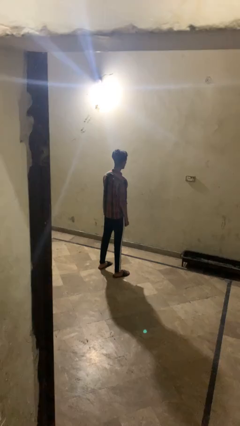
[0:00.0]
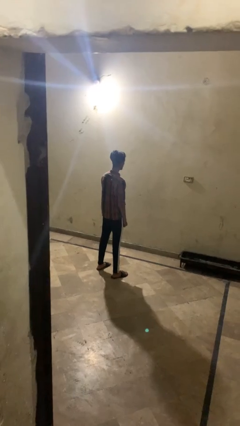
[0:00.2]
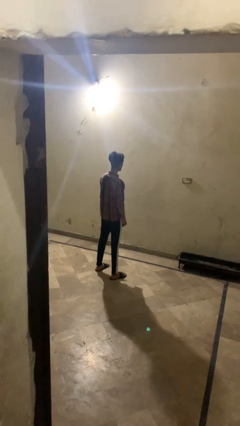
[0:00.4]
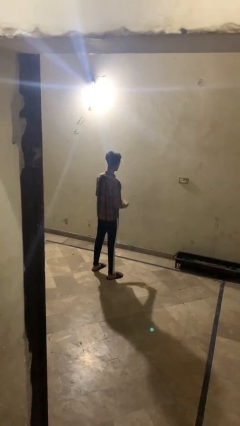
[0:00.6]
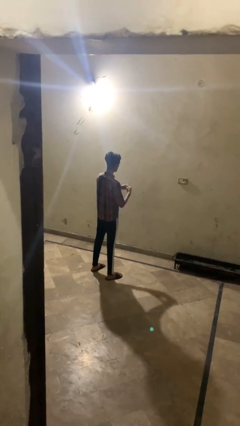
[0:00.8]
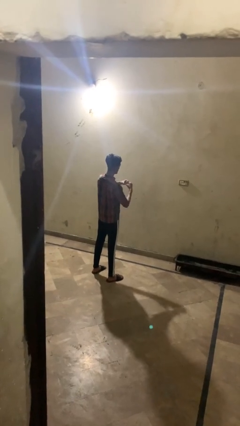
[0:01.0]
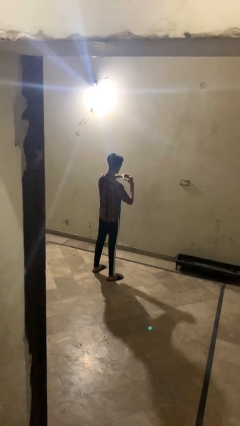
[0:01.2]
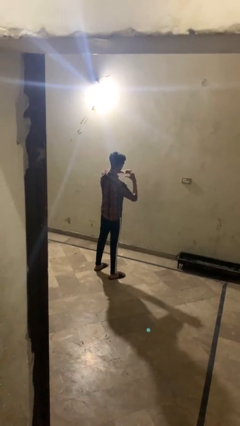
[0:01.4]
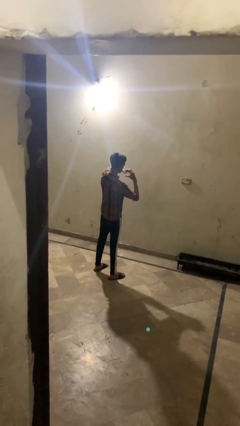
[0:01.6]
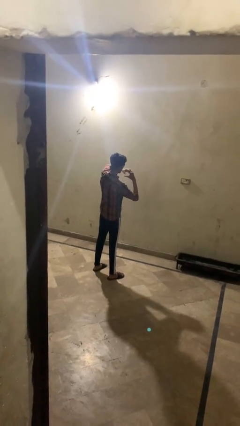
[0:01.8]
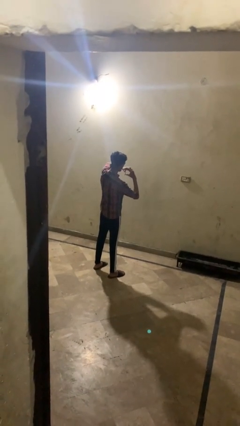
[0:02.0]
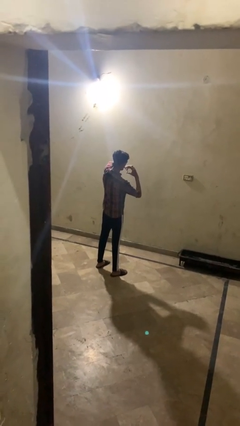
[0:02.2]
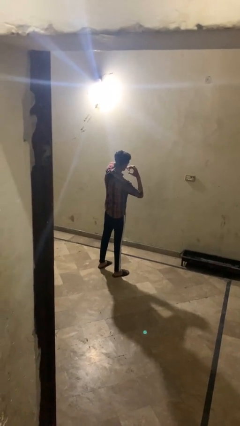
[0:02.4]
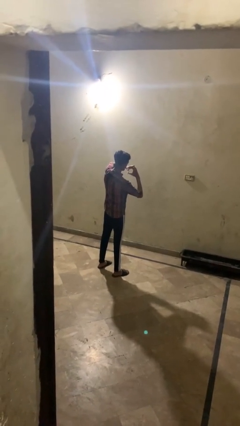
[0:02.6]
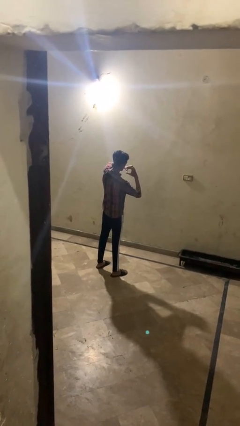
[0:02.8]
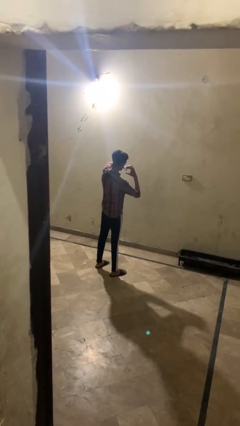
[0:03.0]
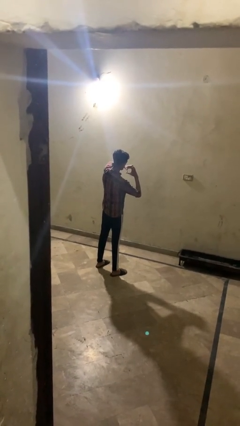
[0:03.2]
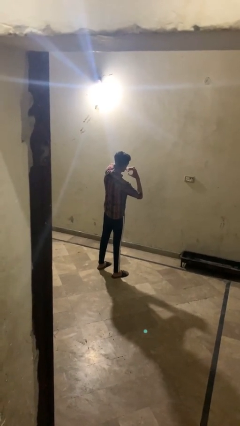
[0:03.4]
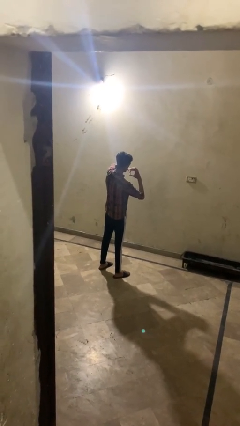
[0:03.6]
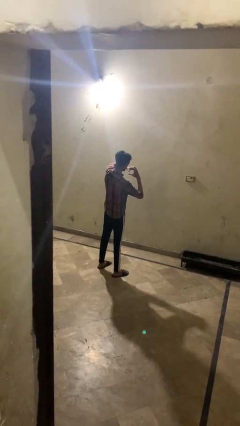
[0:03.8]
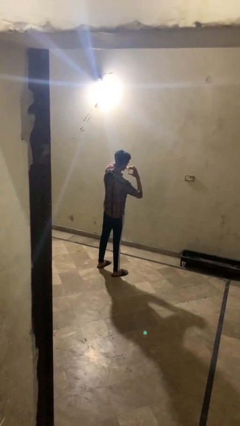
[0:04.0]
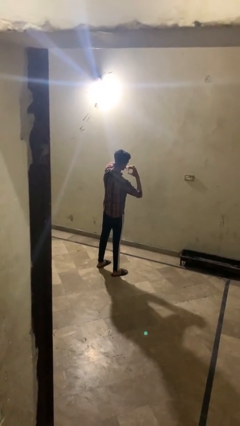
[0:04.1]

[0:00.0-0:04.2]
person gestures heart

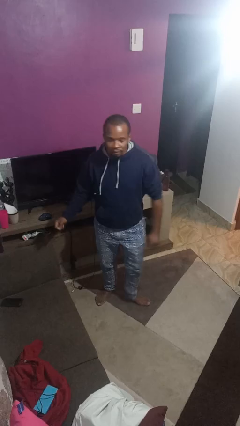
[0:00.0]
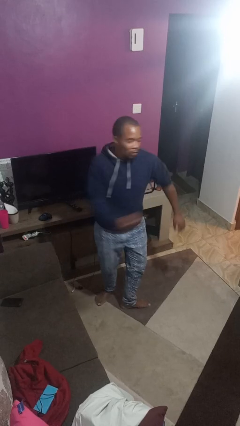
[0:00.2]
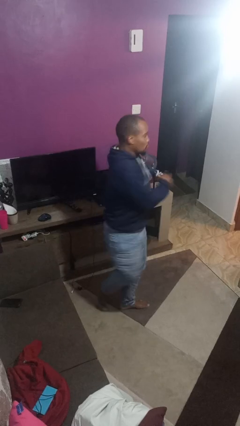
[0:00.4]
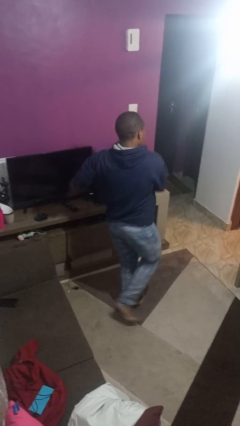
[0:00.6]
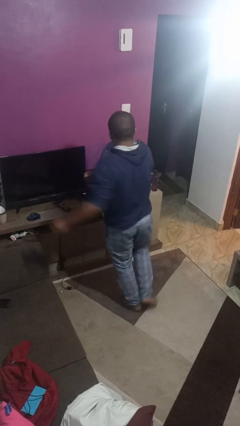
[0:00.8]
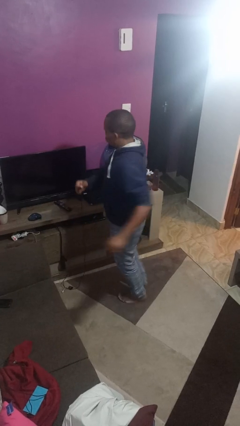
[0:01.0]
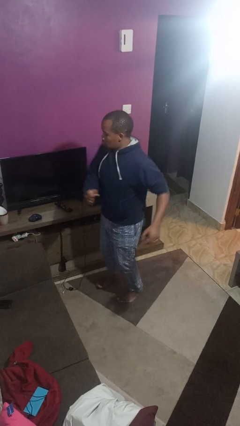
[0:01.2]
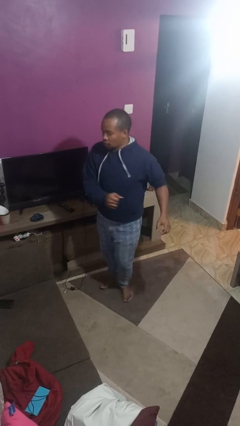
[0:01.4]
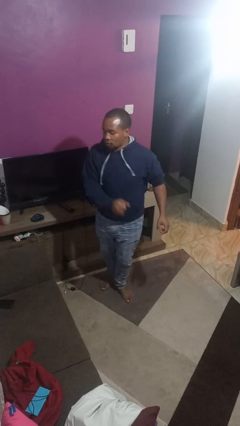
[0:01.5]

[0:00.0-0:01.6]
person twirls

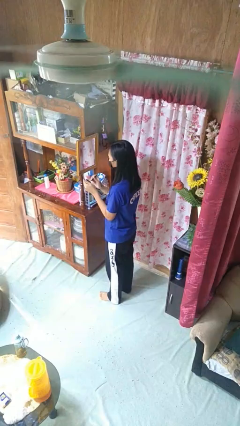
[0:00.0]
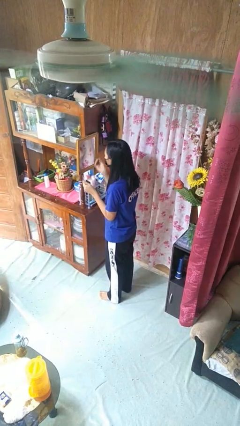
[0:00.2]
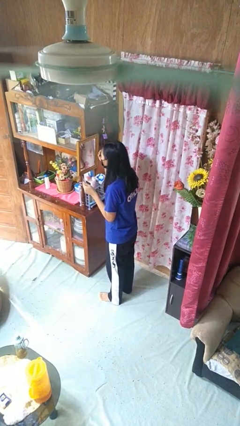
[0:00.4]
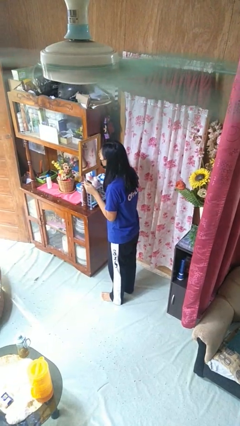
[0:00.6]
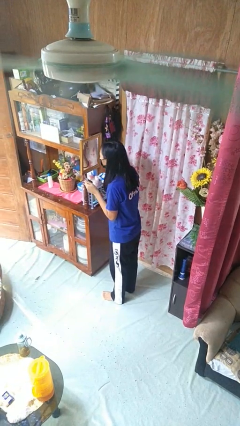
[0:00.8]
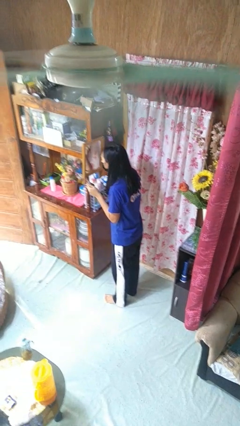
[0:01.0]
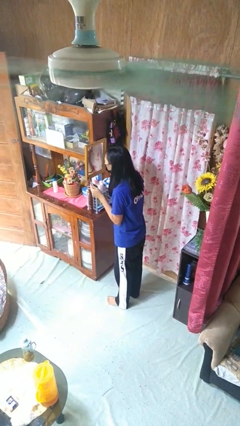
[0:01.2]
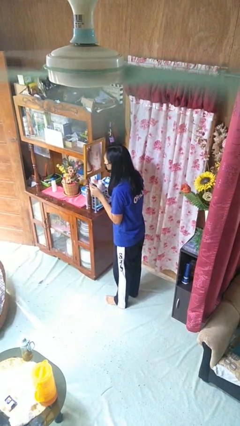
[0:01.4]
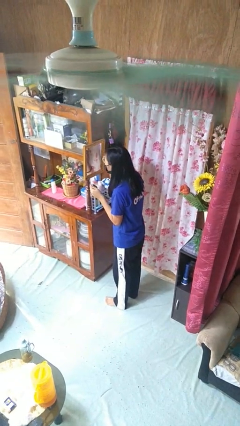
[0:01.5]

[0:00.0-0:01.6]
person applies eye makeup

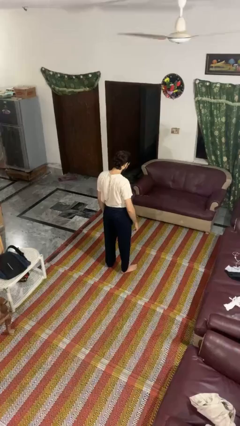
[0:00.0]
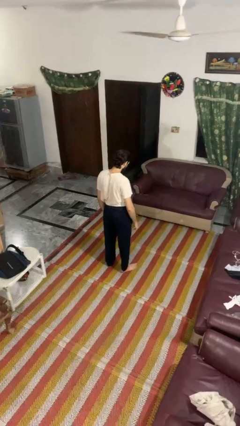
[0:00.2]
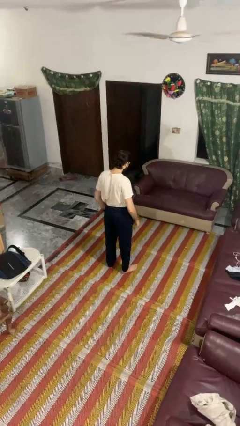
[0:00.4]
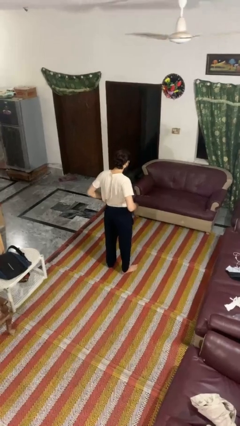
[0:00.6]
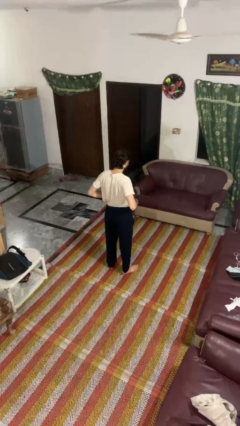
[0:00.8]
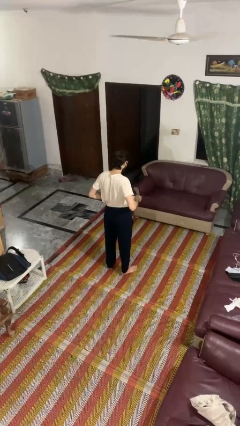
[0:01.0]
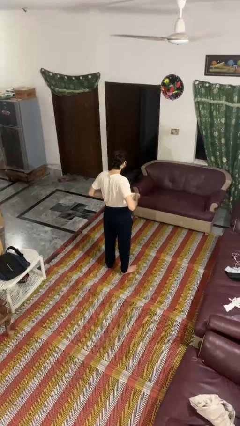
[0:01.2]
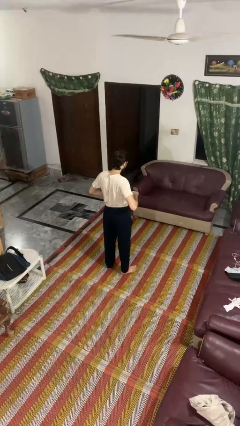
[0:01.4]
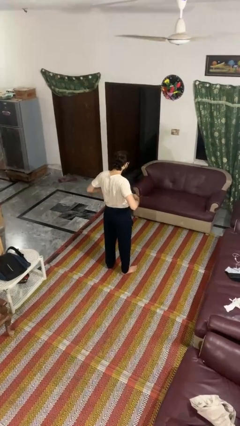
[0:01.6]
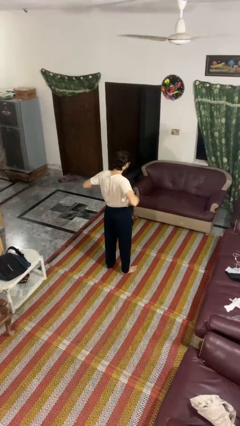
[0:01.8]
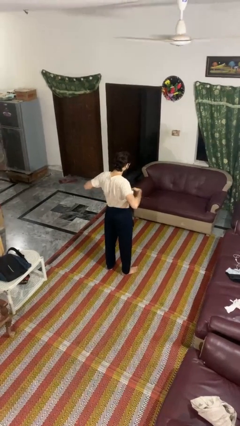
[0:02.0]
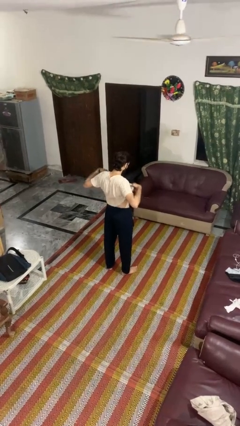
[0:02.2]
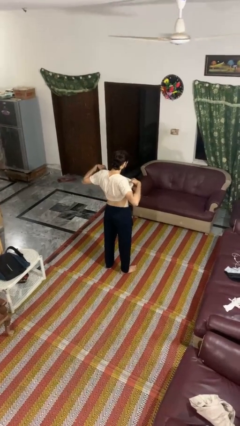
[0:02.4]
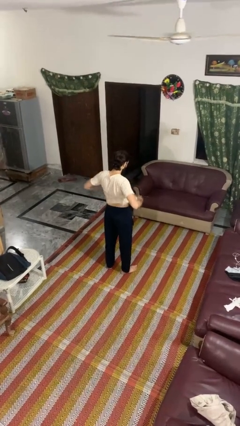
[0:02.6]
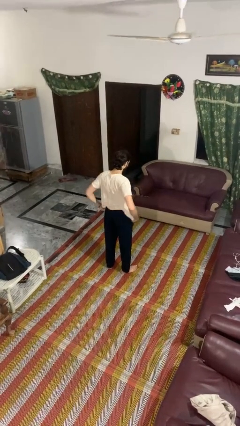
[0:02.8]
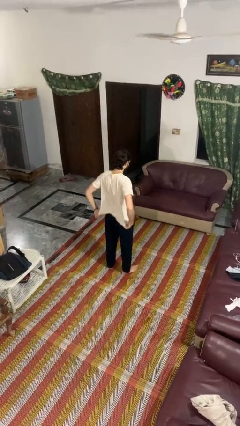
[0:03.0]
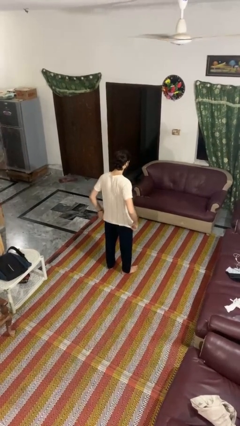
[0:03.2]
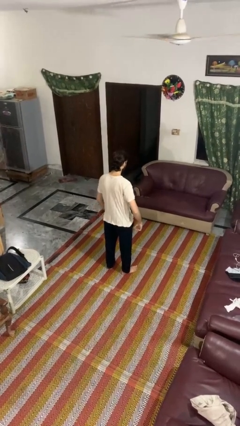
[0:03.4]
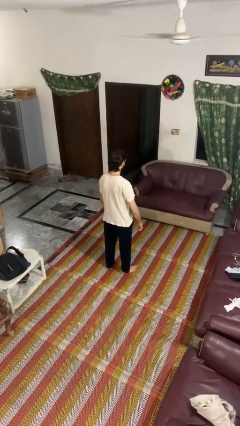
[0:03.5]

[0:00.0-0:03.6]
person untucks shirt

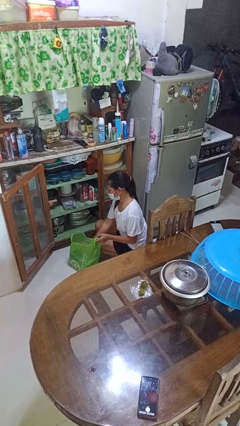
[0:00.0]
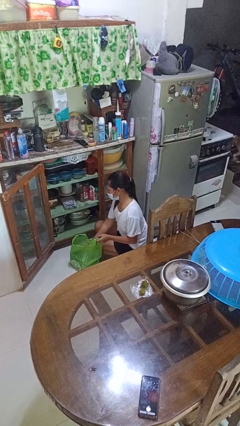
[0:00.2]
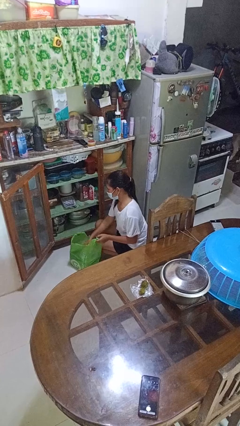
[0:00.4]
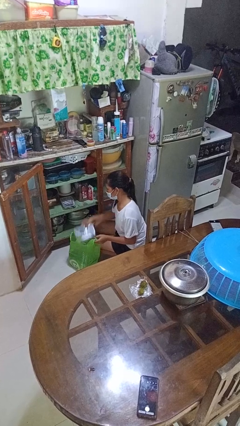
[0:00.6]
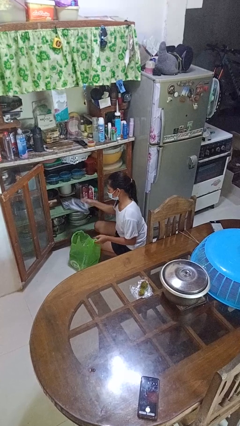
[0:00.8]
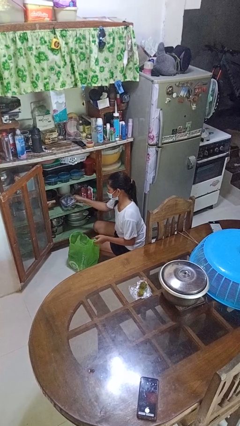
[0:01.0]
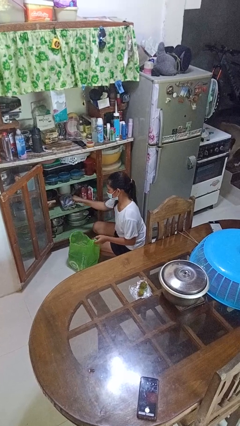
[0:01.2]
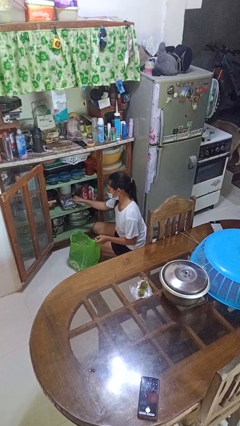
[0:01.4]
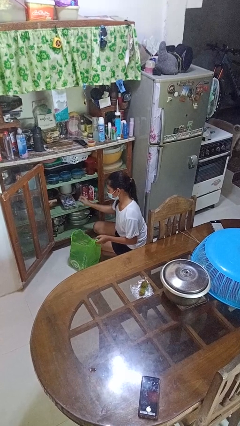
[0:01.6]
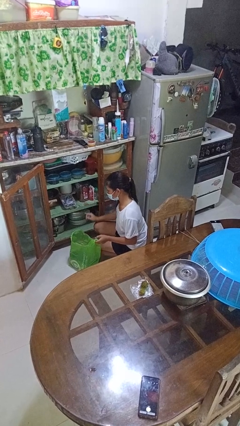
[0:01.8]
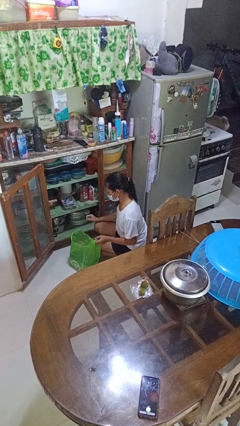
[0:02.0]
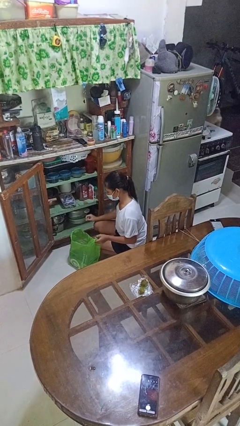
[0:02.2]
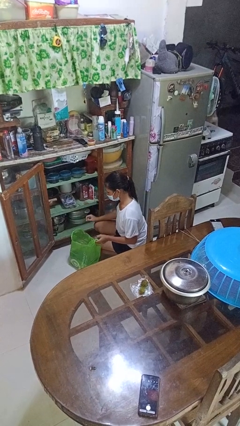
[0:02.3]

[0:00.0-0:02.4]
person loads groceries into cabinet

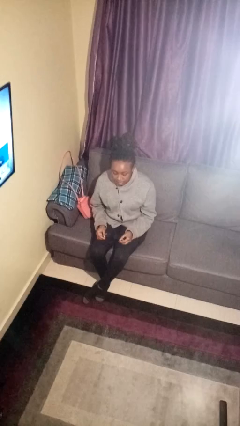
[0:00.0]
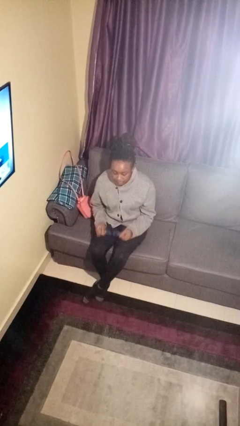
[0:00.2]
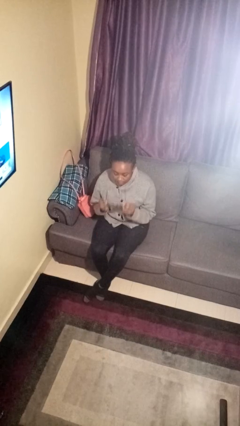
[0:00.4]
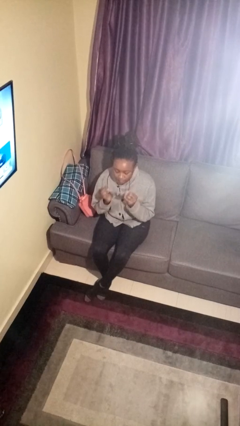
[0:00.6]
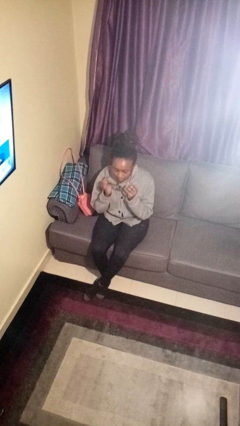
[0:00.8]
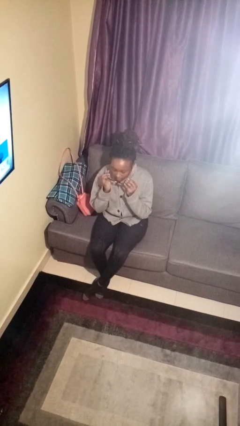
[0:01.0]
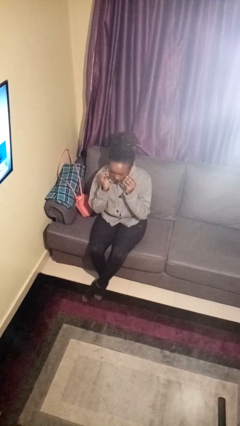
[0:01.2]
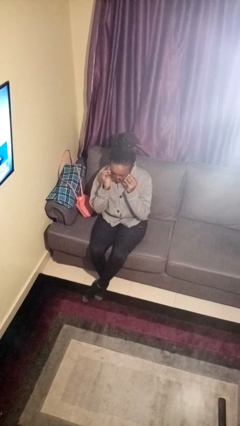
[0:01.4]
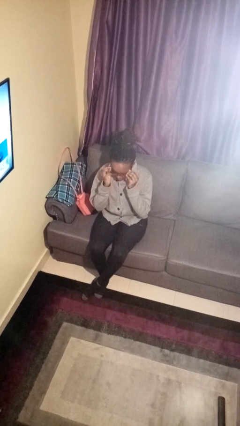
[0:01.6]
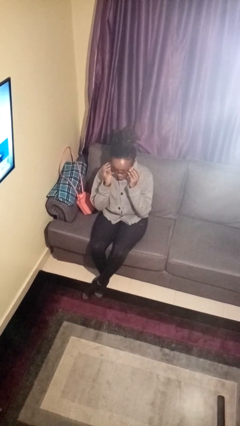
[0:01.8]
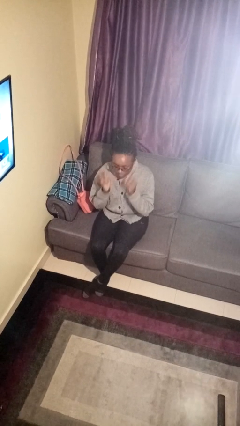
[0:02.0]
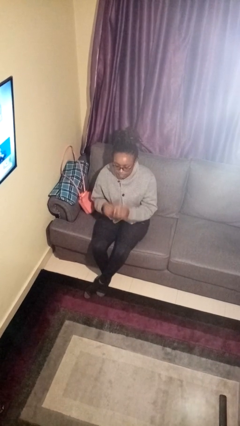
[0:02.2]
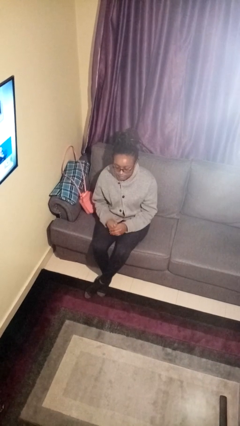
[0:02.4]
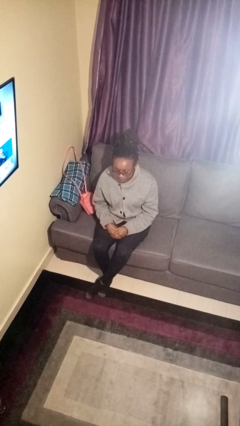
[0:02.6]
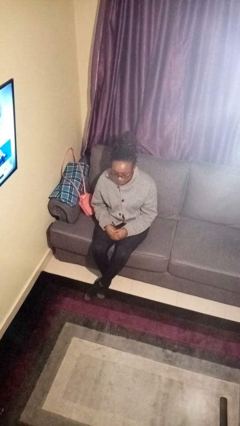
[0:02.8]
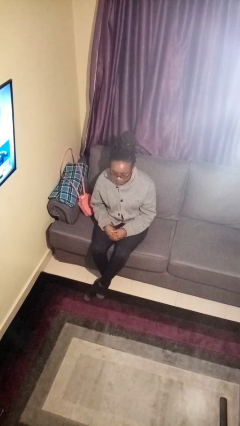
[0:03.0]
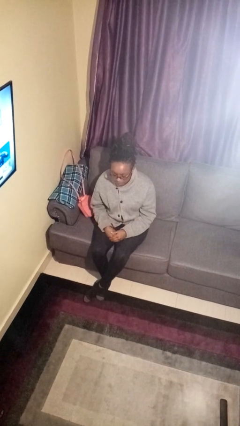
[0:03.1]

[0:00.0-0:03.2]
person puts on glasses

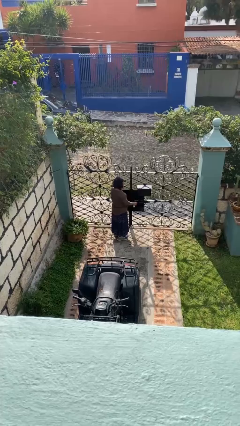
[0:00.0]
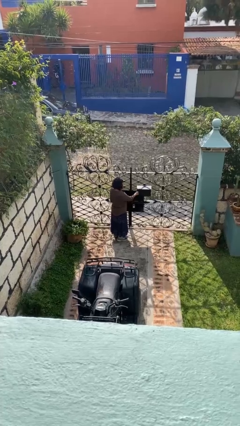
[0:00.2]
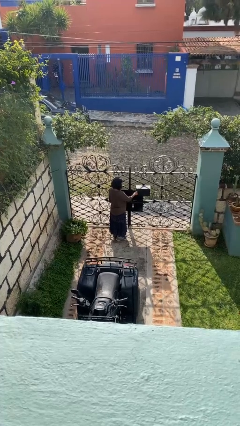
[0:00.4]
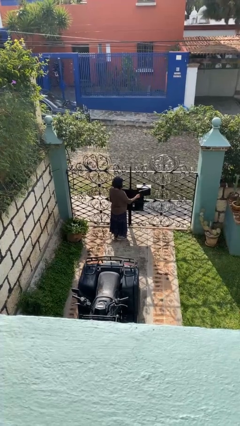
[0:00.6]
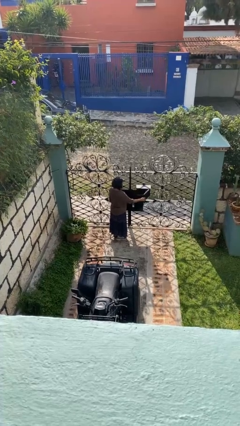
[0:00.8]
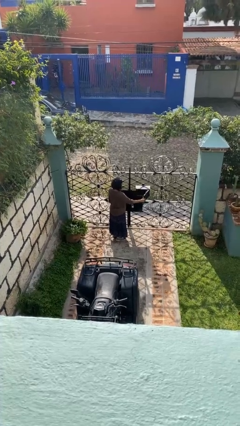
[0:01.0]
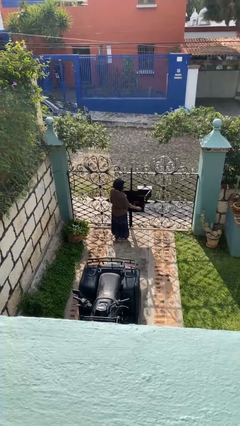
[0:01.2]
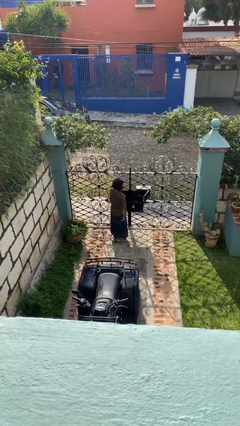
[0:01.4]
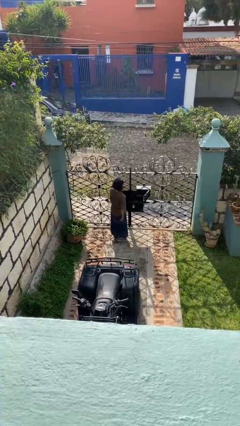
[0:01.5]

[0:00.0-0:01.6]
person opens mailbox
